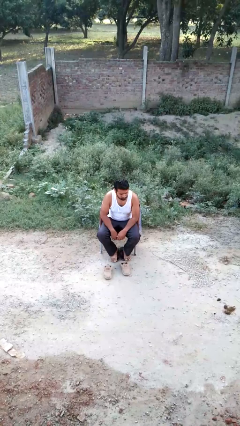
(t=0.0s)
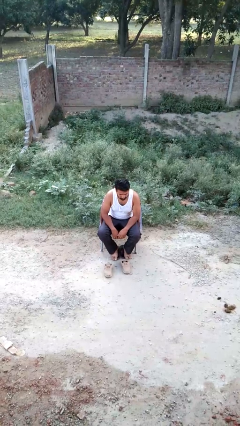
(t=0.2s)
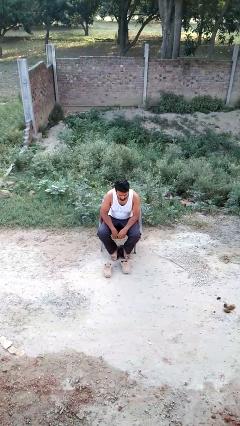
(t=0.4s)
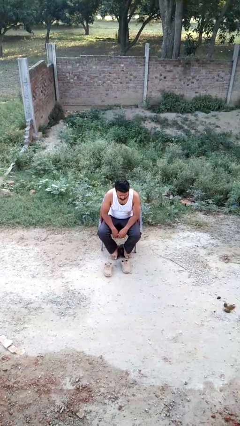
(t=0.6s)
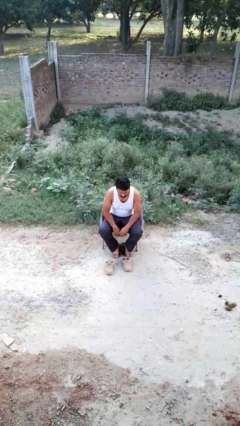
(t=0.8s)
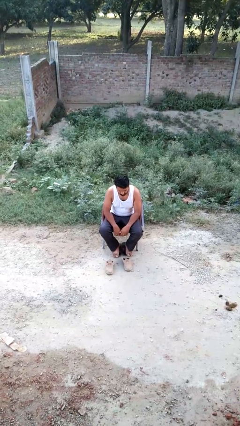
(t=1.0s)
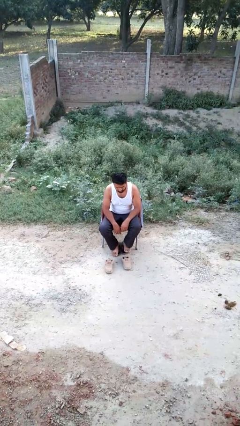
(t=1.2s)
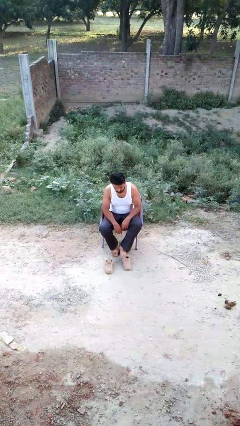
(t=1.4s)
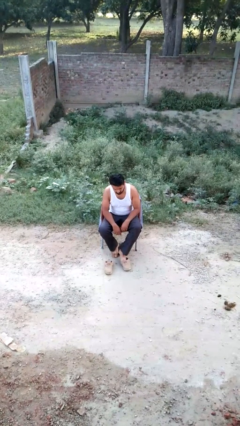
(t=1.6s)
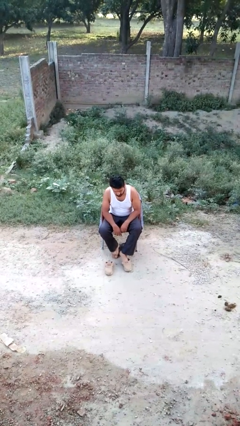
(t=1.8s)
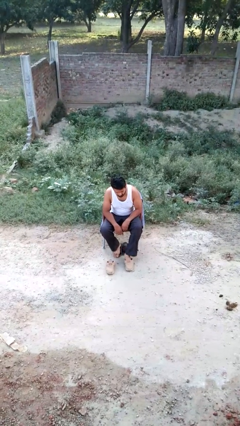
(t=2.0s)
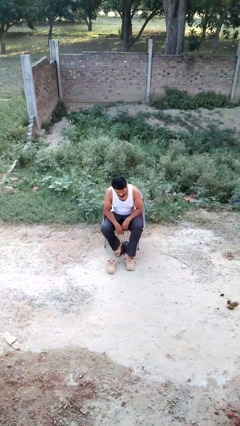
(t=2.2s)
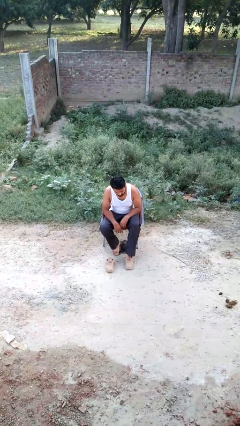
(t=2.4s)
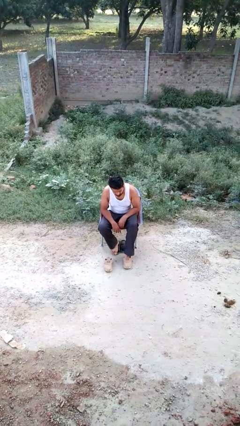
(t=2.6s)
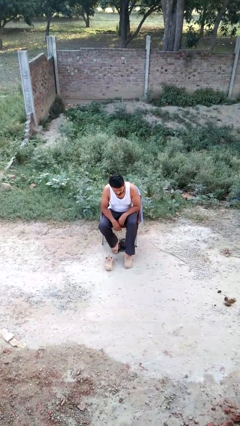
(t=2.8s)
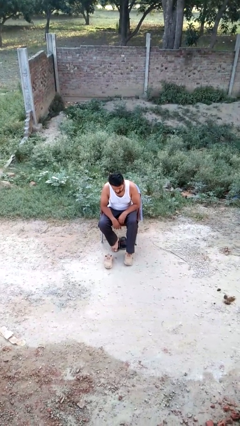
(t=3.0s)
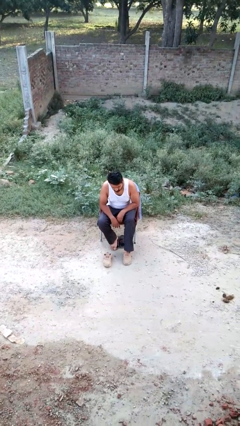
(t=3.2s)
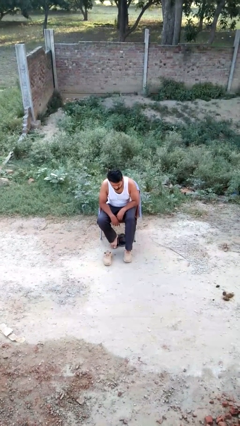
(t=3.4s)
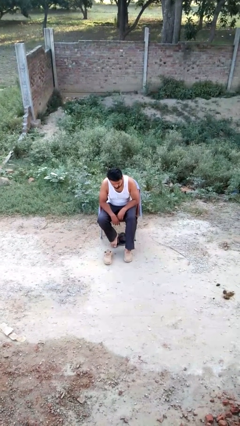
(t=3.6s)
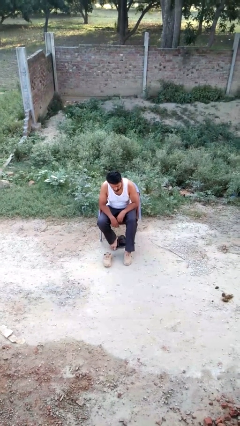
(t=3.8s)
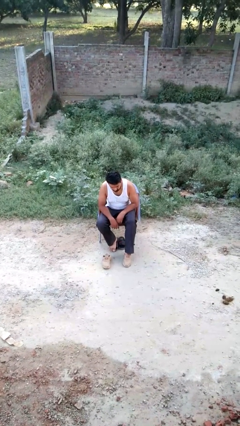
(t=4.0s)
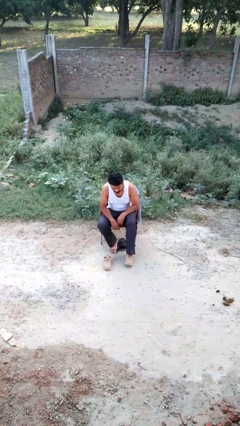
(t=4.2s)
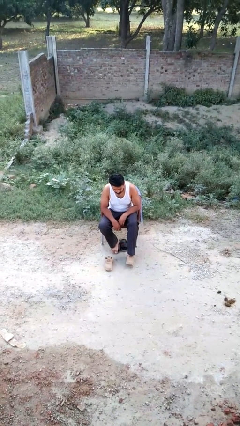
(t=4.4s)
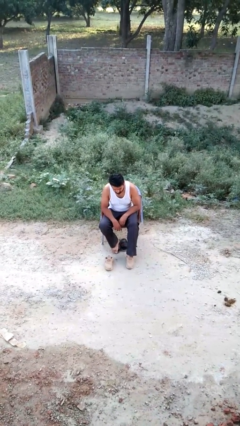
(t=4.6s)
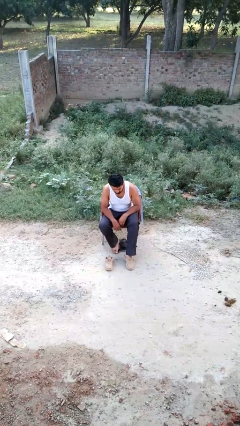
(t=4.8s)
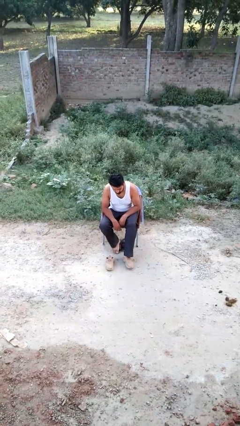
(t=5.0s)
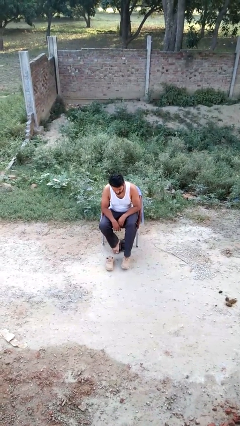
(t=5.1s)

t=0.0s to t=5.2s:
person puts on shoes

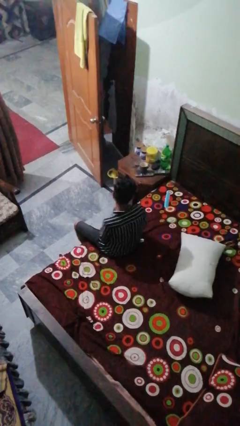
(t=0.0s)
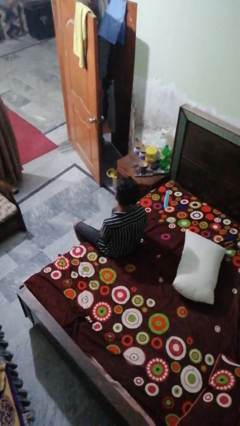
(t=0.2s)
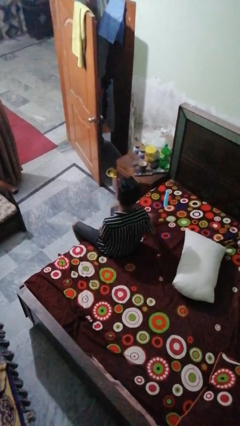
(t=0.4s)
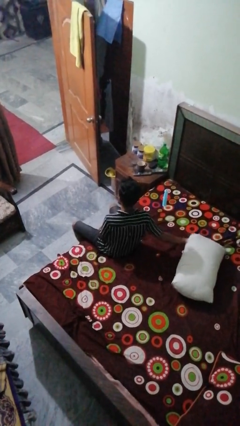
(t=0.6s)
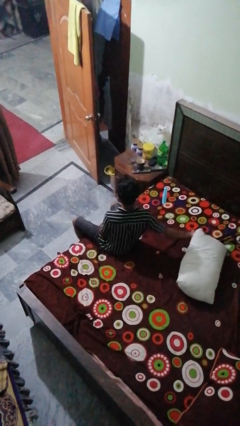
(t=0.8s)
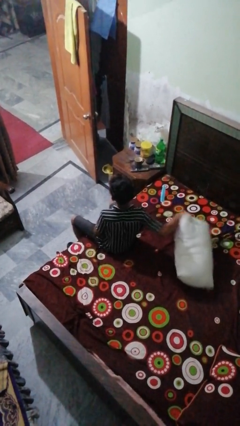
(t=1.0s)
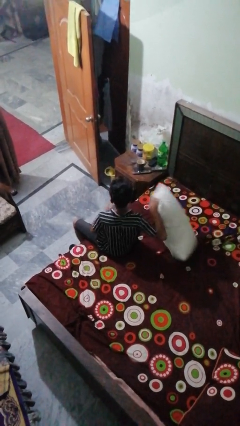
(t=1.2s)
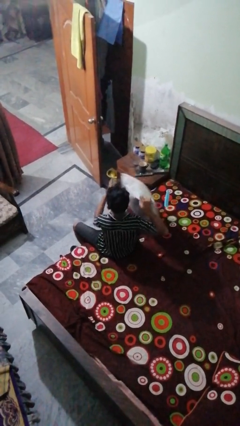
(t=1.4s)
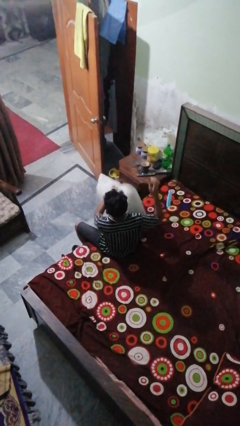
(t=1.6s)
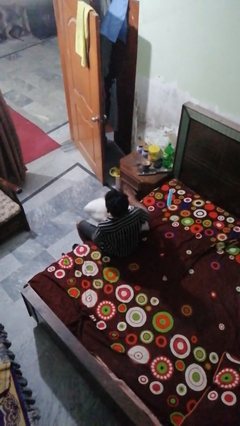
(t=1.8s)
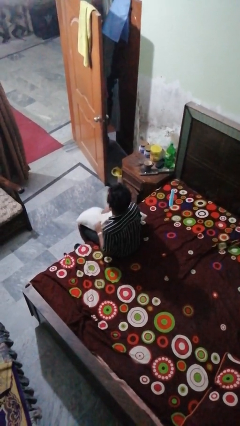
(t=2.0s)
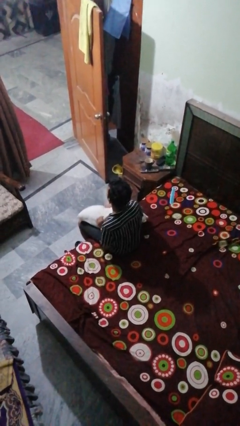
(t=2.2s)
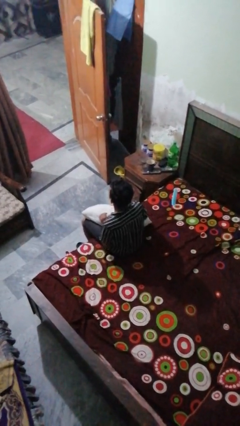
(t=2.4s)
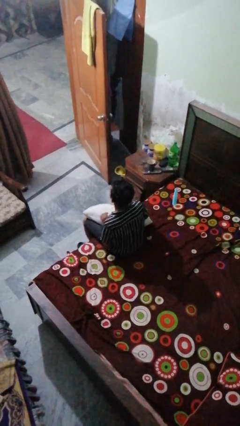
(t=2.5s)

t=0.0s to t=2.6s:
person picks up object from bed

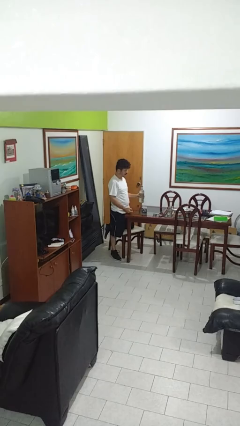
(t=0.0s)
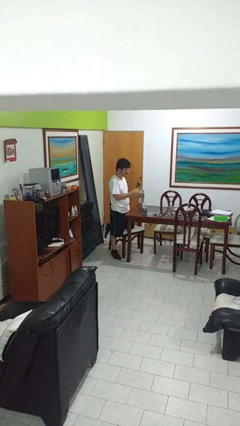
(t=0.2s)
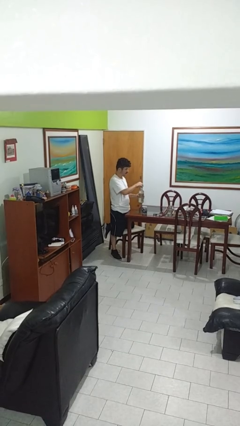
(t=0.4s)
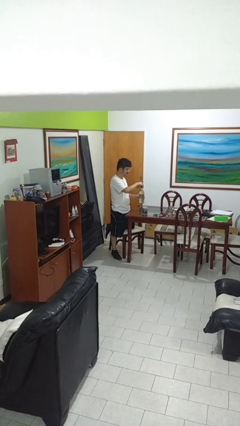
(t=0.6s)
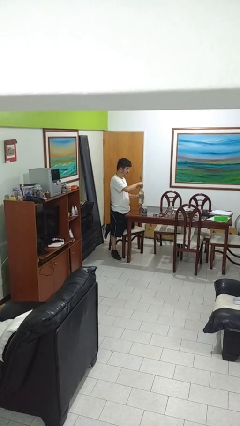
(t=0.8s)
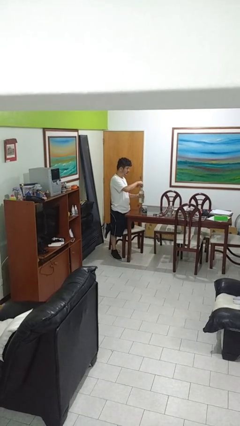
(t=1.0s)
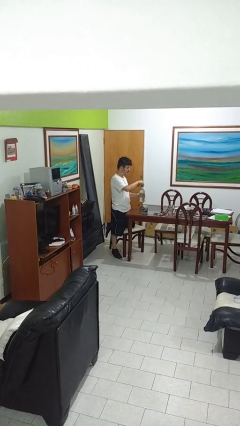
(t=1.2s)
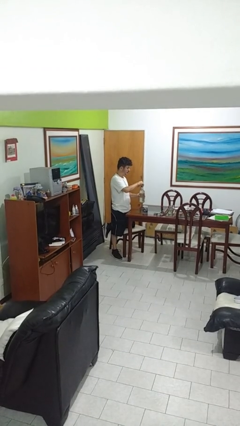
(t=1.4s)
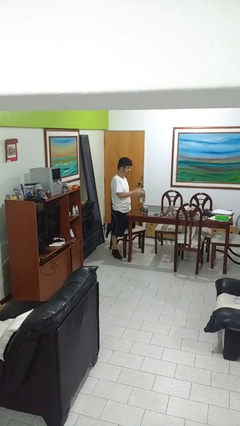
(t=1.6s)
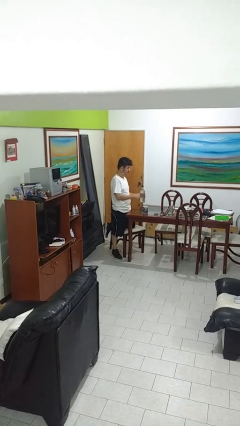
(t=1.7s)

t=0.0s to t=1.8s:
person screws lid to bottle

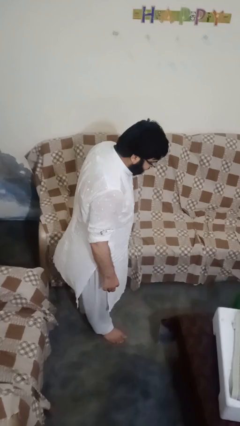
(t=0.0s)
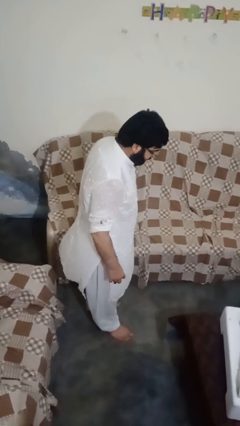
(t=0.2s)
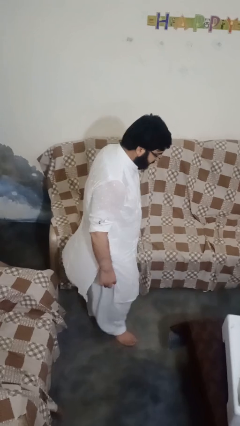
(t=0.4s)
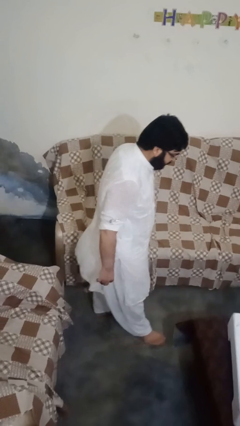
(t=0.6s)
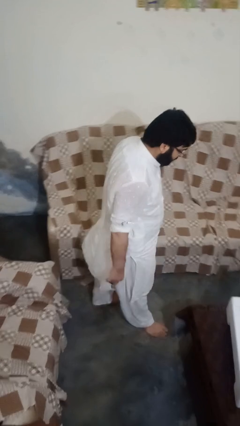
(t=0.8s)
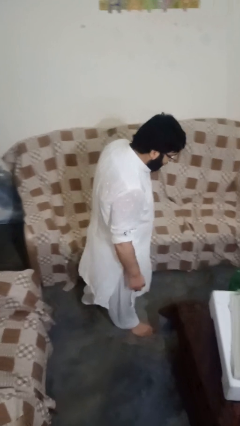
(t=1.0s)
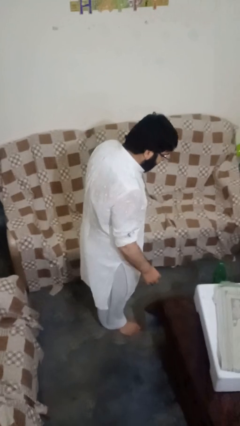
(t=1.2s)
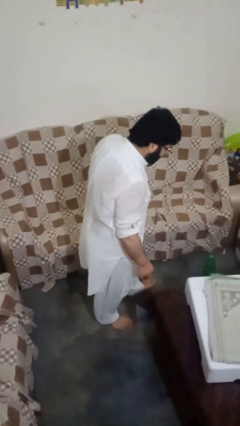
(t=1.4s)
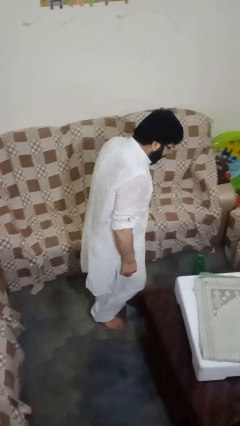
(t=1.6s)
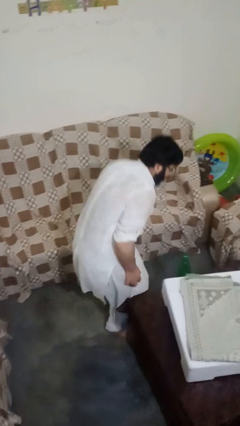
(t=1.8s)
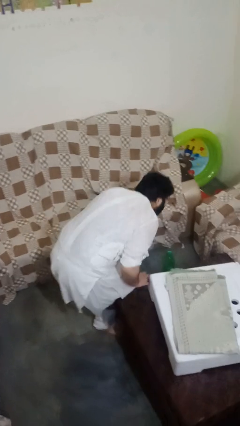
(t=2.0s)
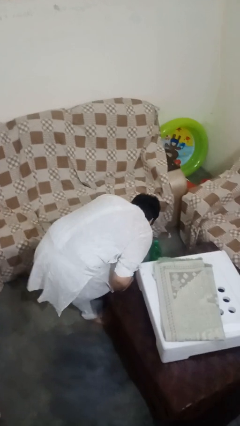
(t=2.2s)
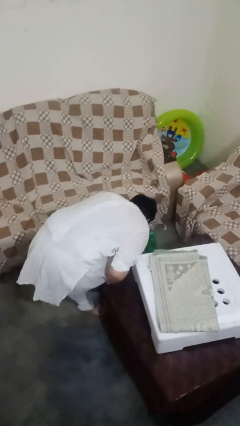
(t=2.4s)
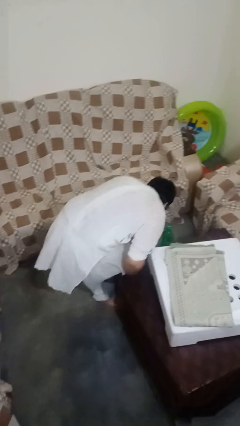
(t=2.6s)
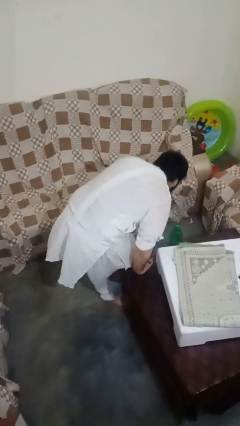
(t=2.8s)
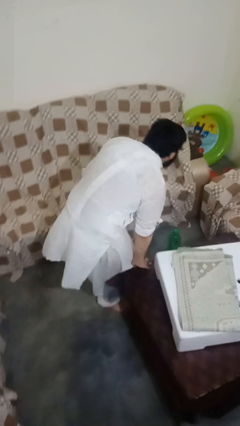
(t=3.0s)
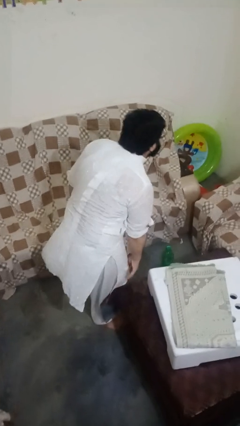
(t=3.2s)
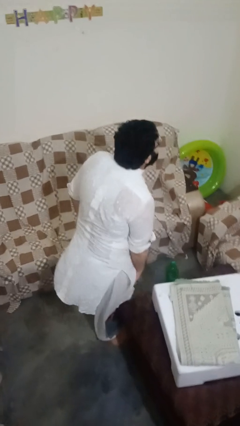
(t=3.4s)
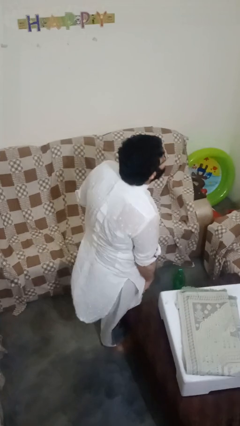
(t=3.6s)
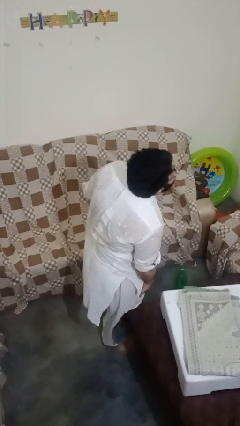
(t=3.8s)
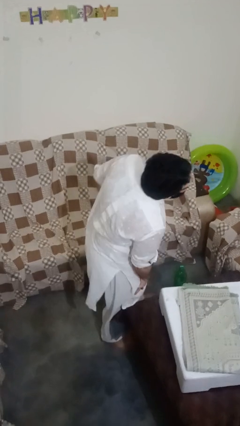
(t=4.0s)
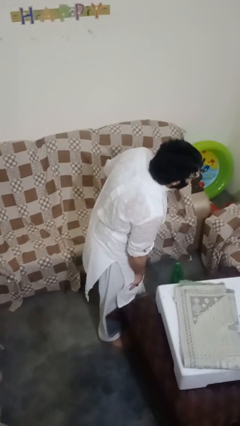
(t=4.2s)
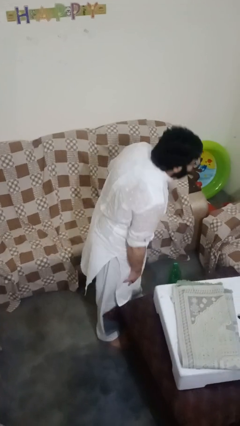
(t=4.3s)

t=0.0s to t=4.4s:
person bumps into table

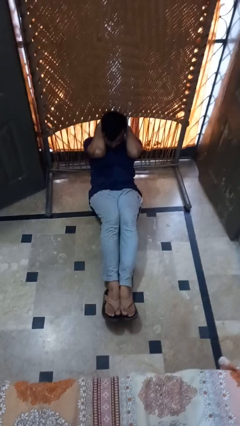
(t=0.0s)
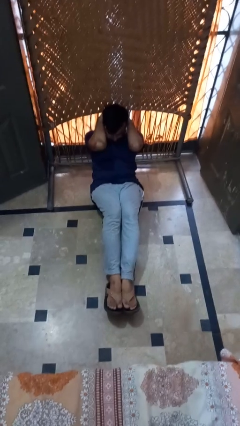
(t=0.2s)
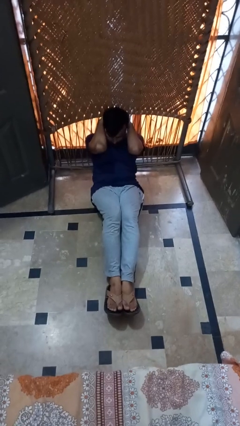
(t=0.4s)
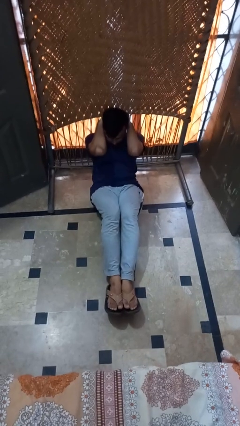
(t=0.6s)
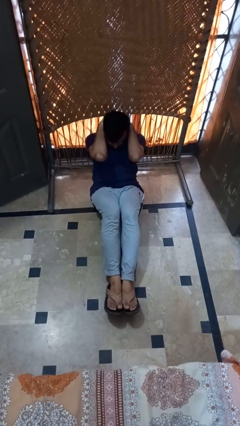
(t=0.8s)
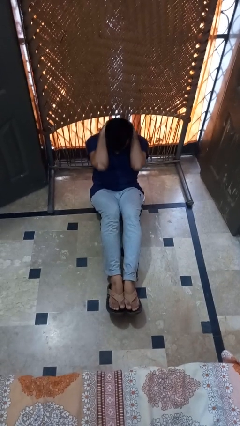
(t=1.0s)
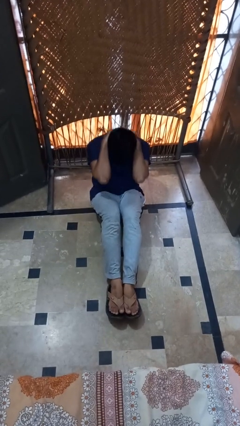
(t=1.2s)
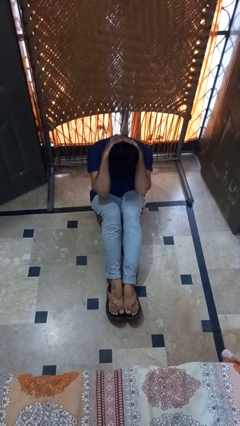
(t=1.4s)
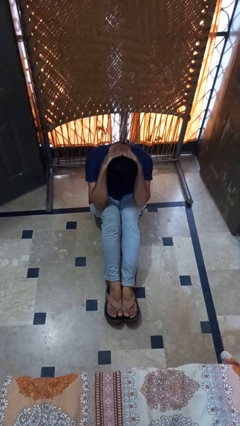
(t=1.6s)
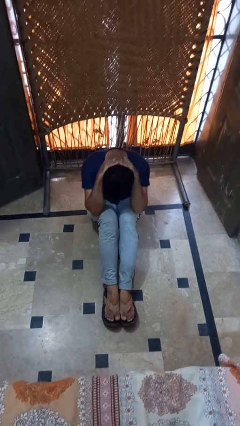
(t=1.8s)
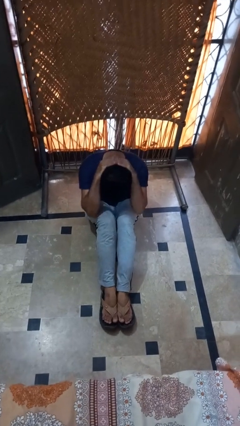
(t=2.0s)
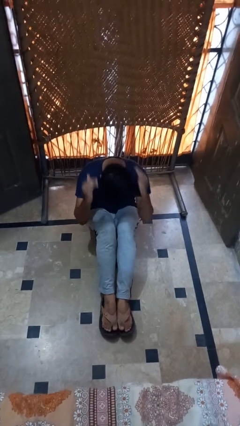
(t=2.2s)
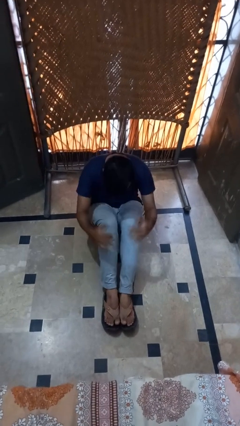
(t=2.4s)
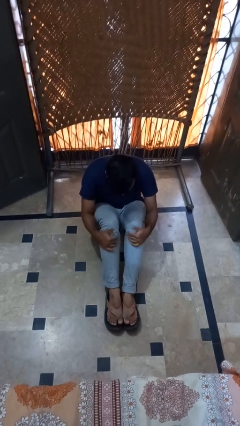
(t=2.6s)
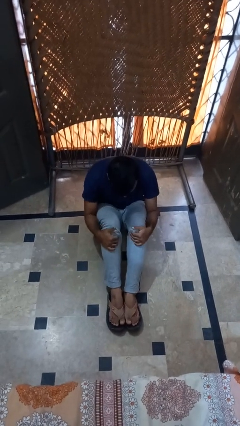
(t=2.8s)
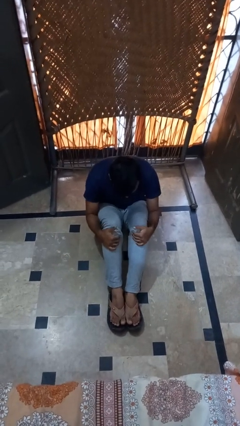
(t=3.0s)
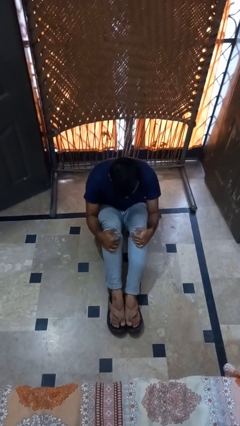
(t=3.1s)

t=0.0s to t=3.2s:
person exercises with situp
